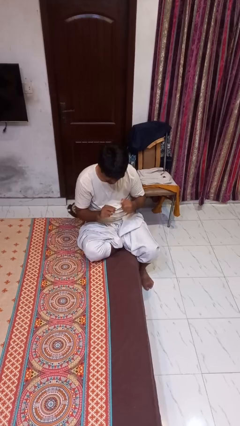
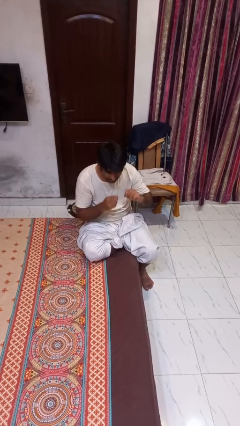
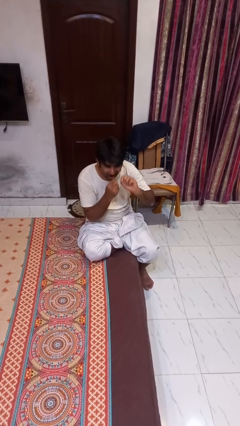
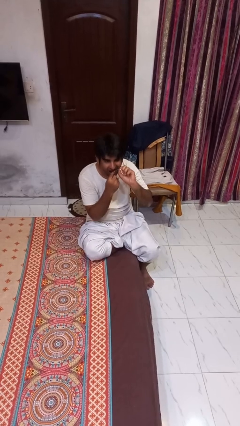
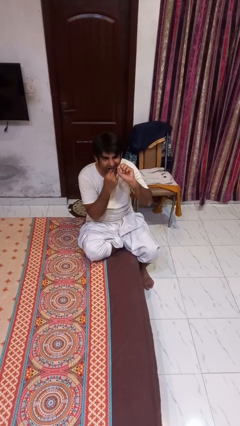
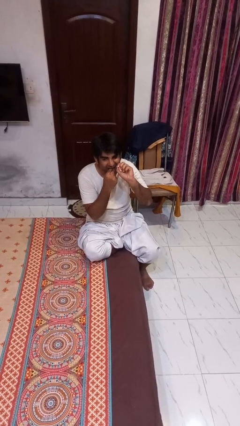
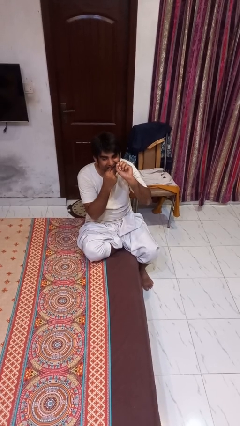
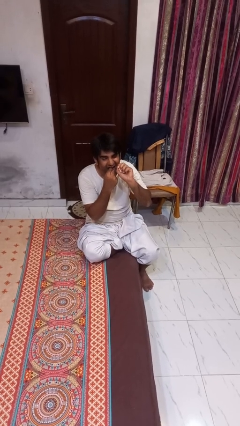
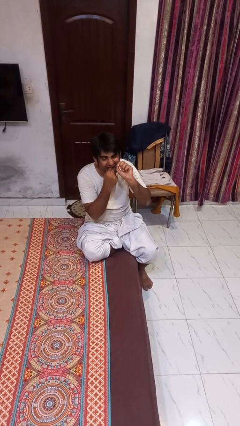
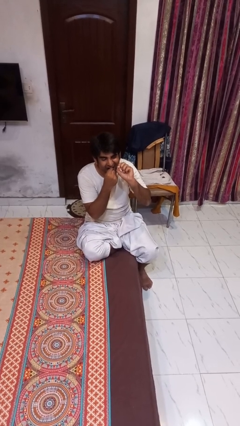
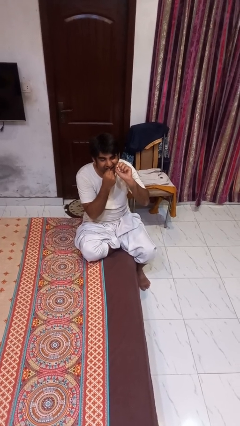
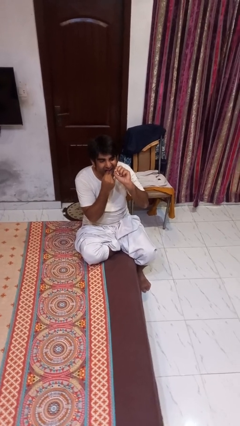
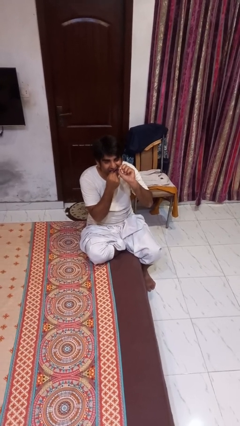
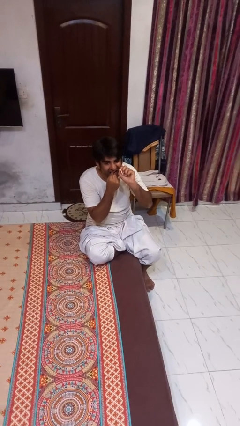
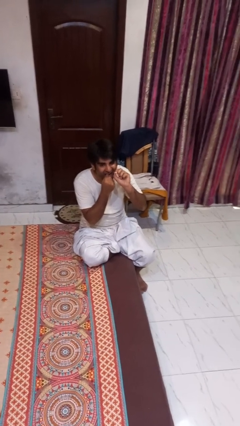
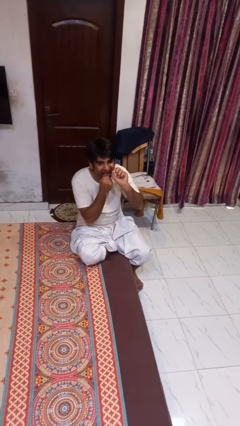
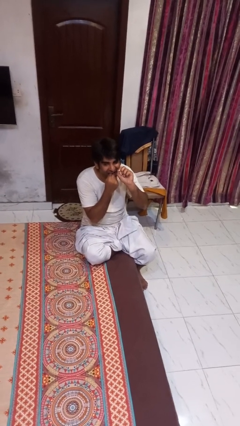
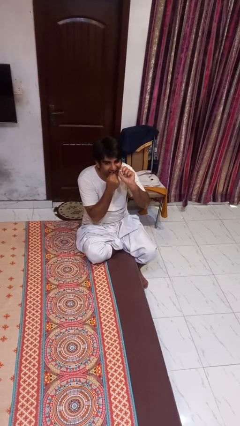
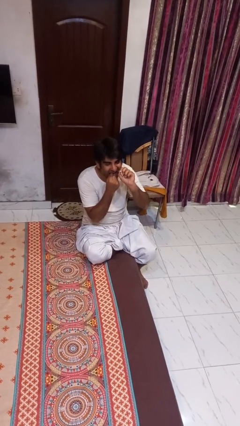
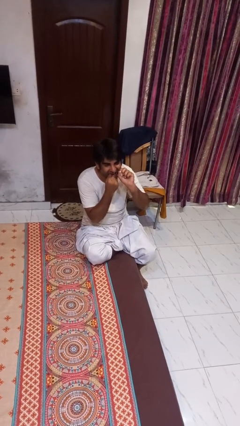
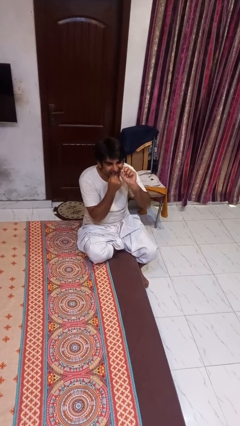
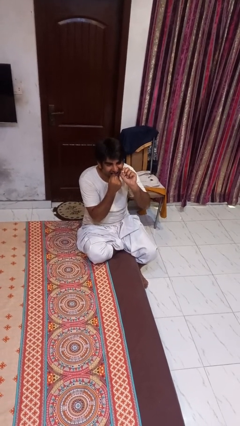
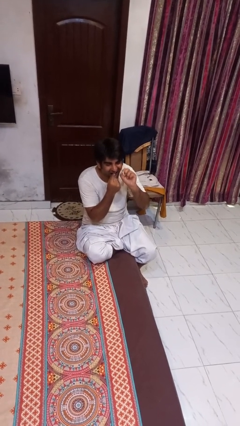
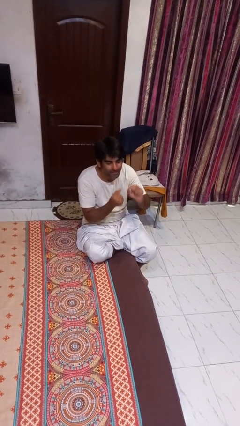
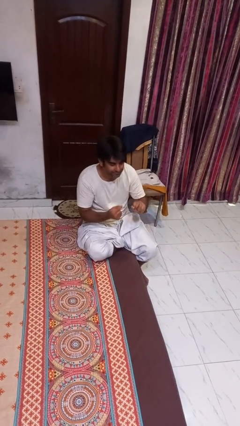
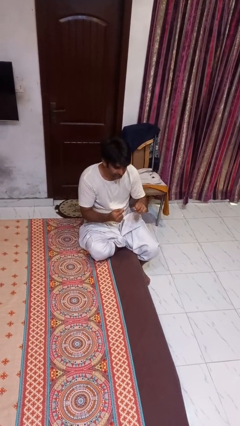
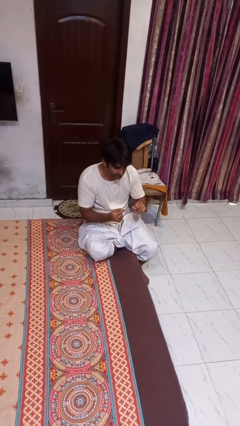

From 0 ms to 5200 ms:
person flosses

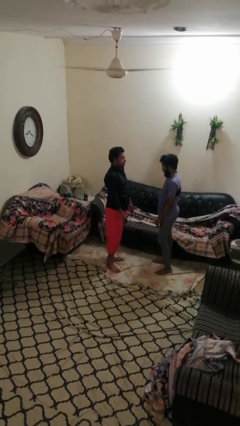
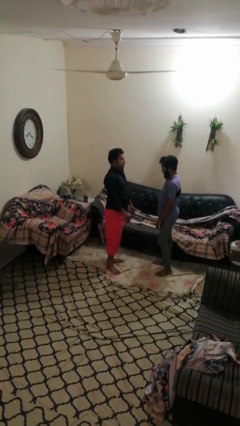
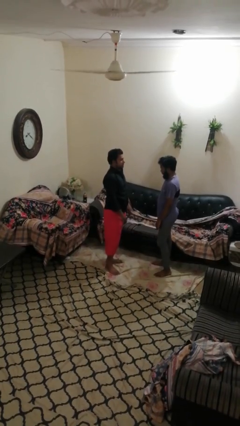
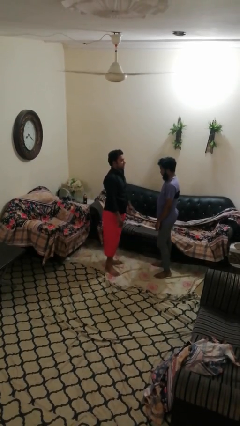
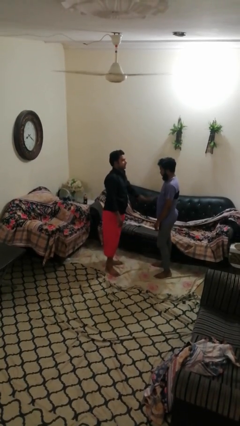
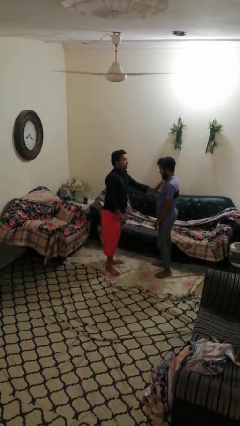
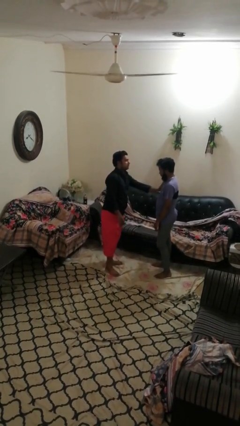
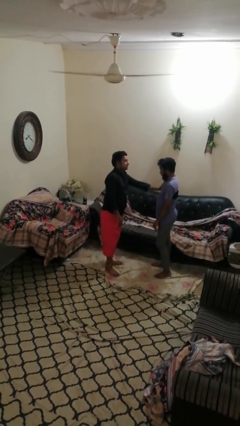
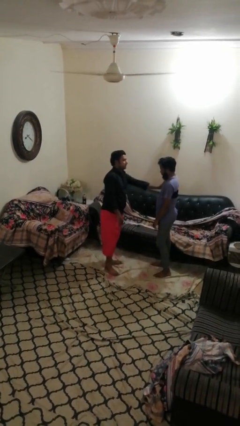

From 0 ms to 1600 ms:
person shoves person

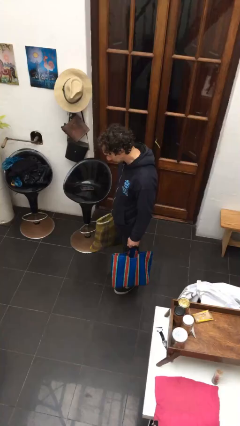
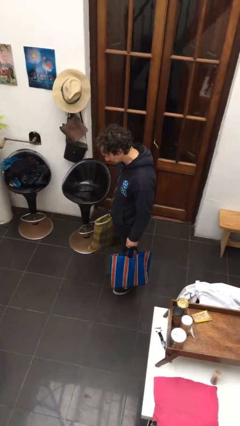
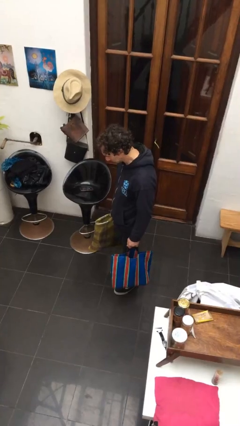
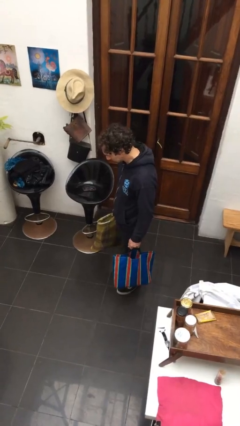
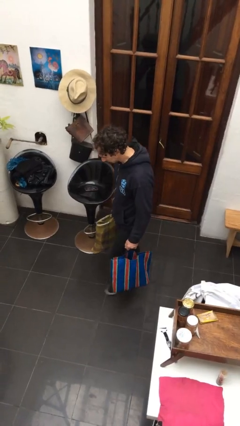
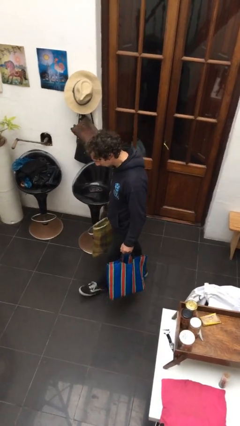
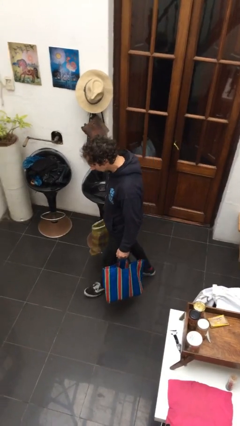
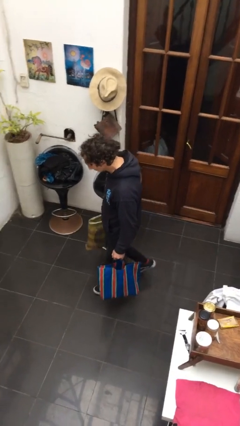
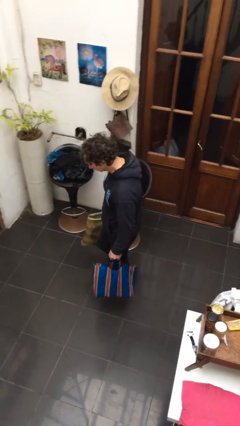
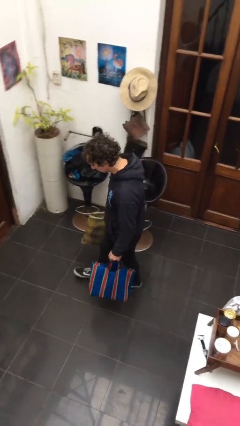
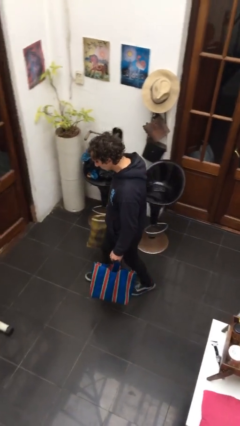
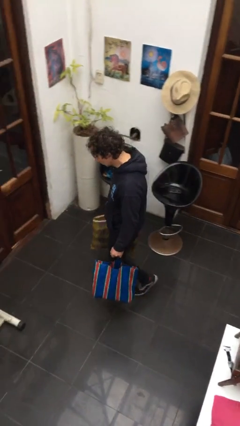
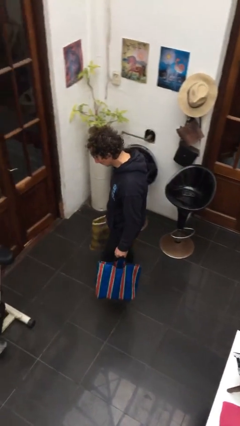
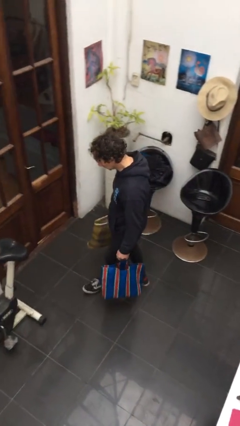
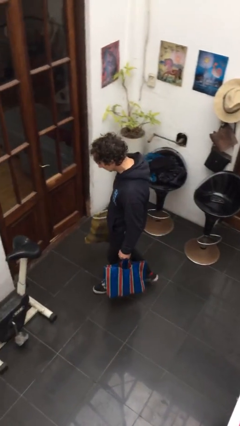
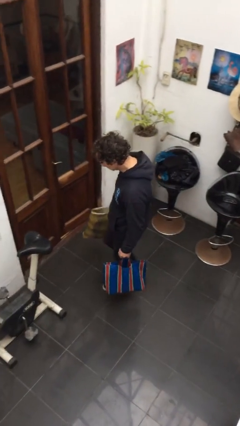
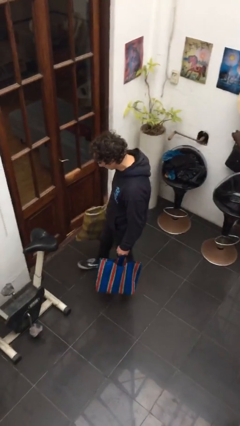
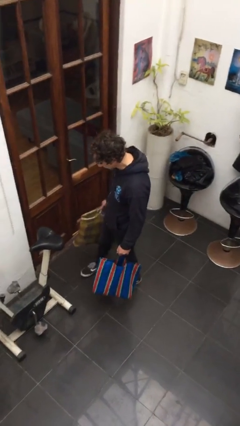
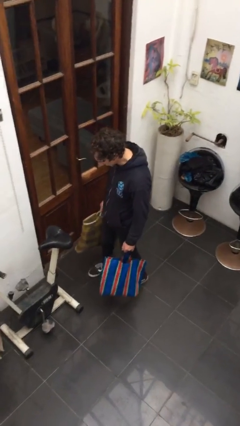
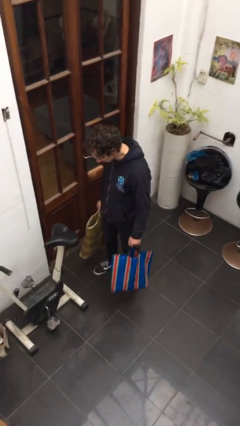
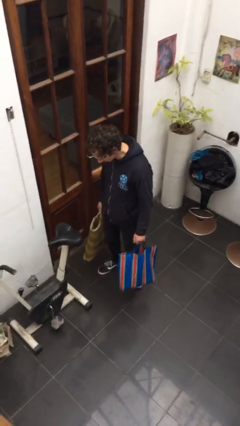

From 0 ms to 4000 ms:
person carries groceries

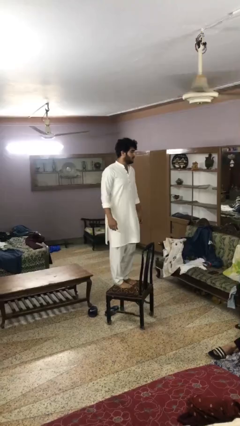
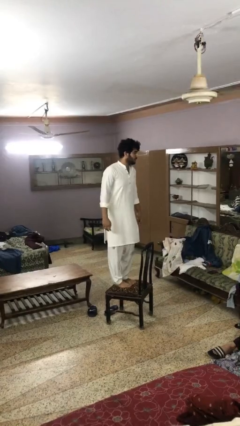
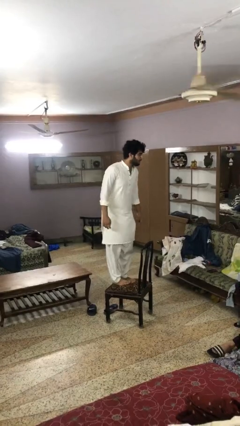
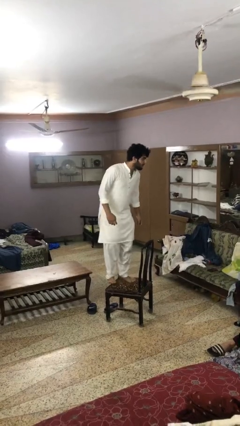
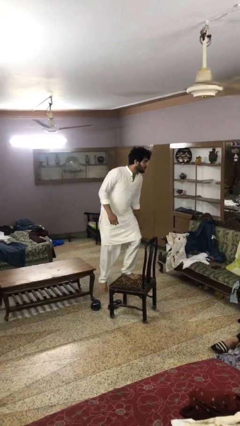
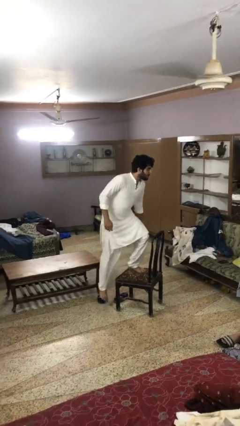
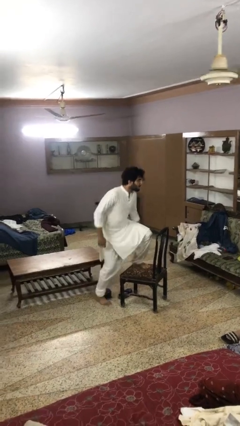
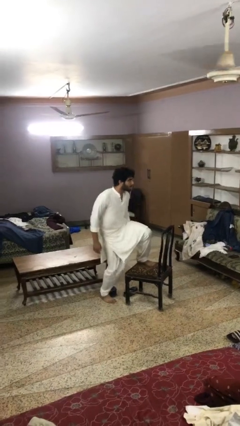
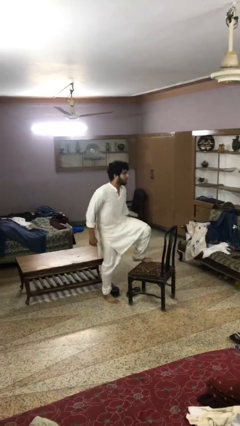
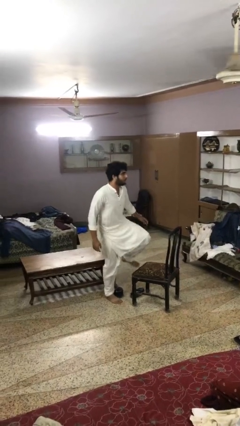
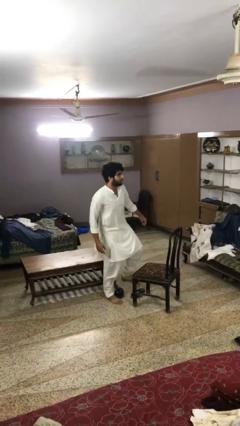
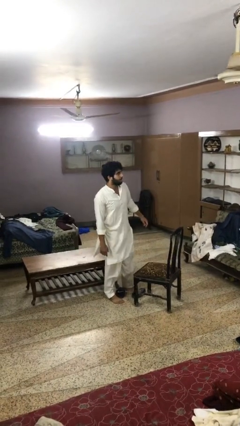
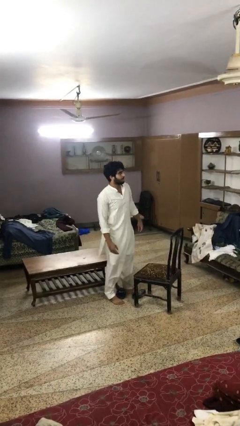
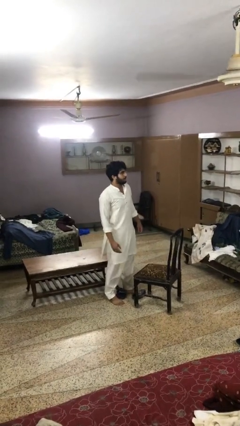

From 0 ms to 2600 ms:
person climbs off chair

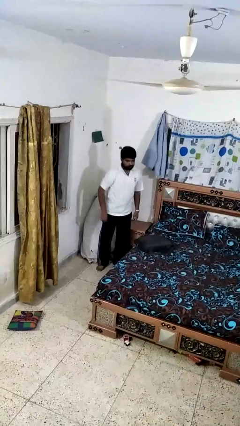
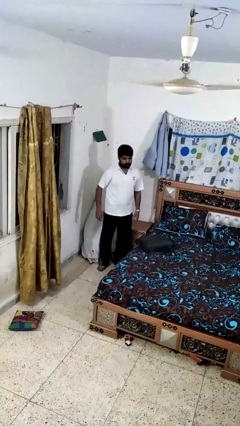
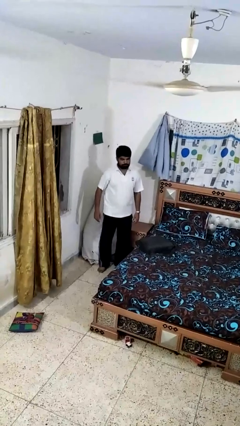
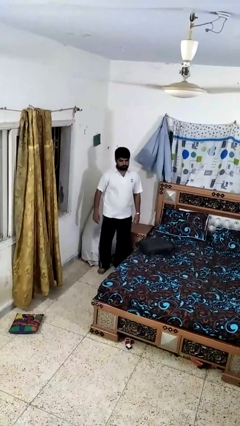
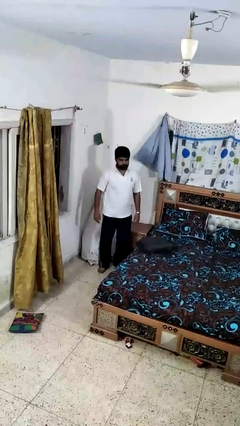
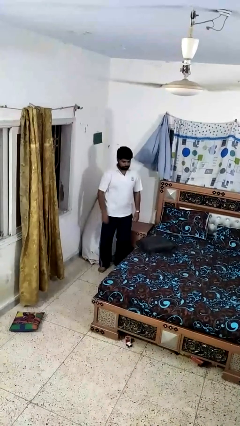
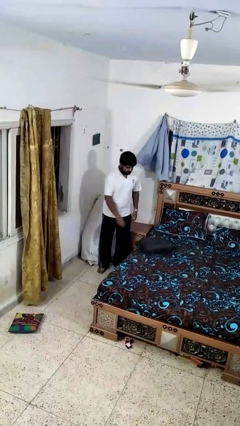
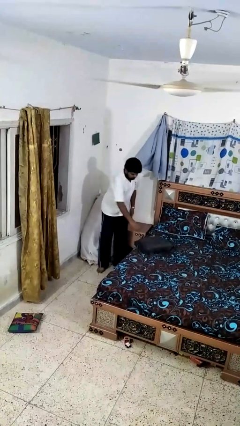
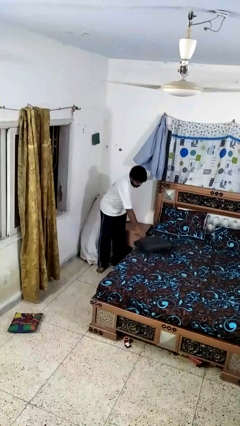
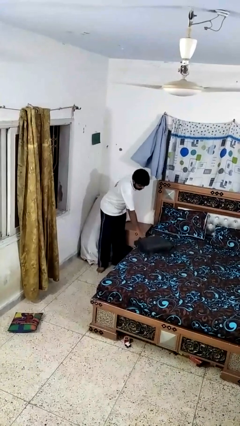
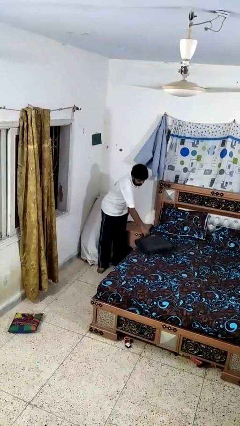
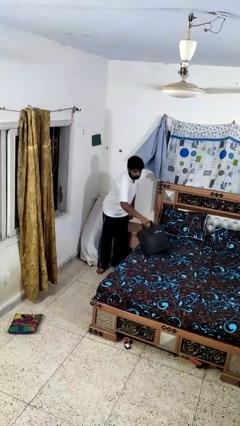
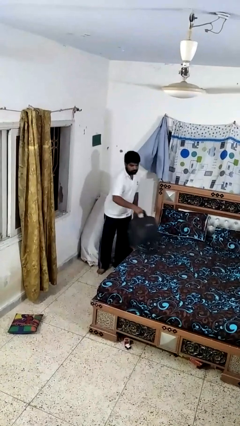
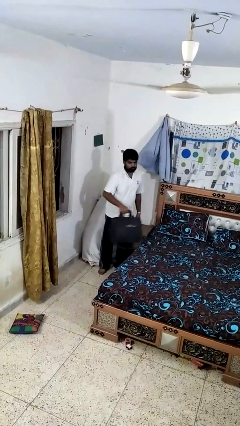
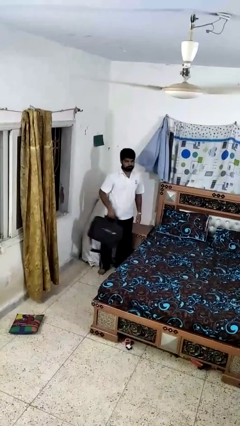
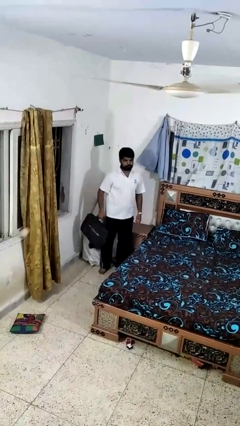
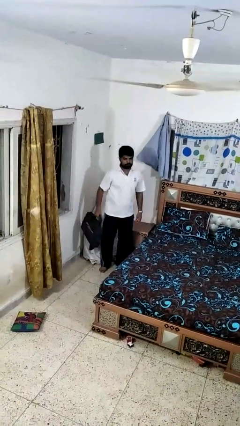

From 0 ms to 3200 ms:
person picks up object from bed

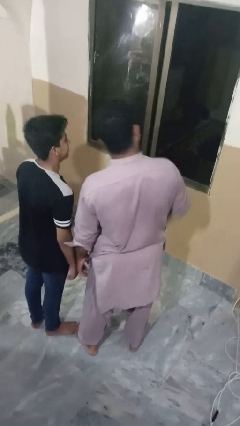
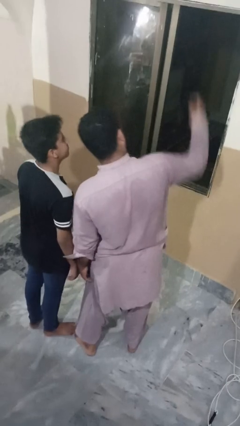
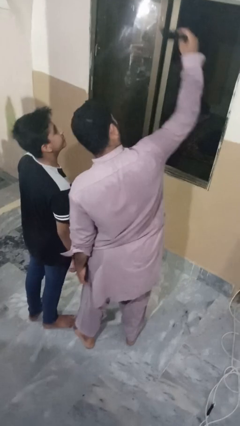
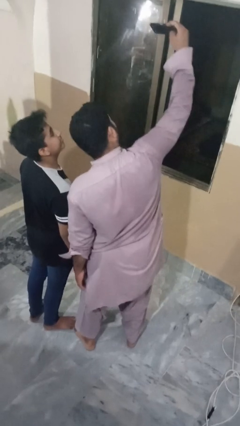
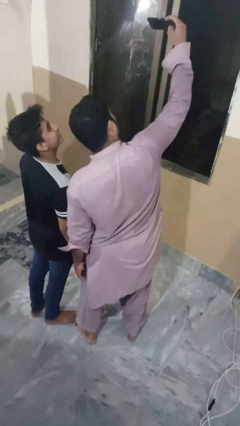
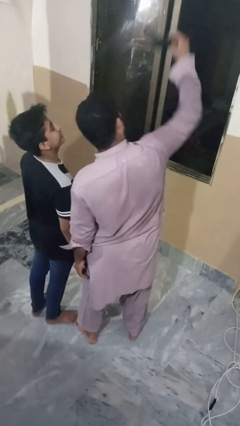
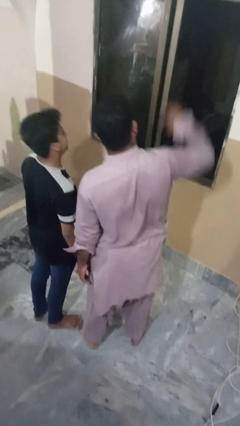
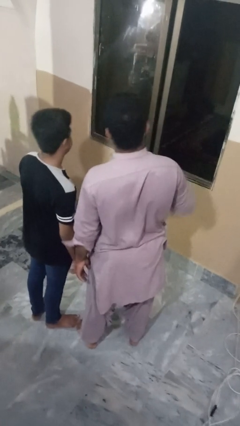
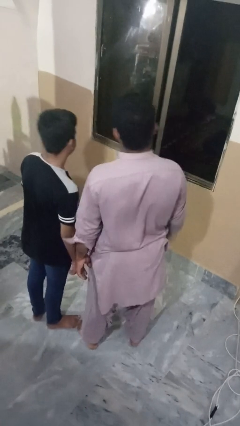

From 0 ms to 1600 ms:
person takes selfie with person
